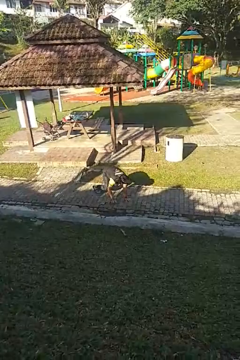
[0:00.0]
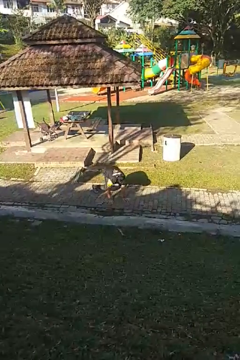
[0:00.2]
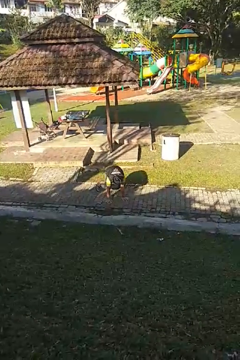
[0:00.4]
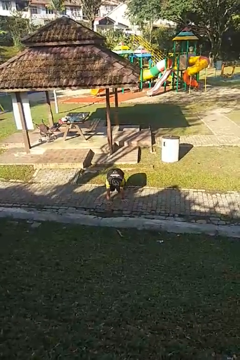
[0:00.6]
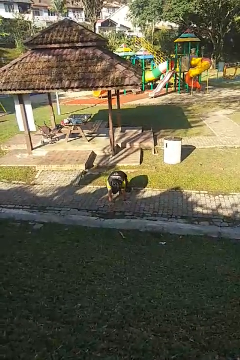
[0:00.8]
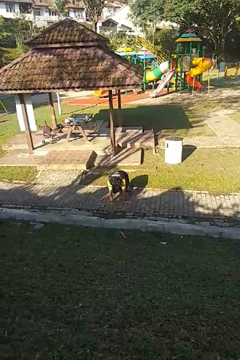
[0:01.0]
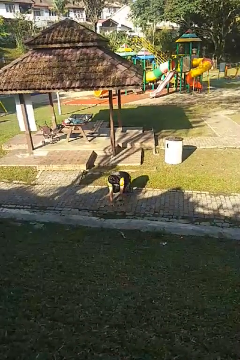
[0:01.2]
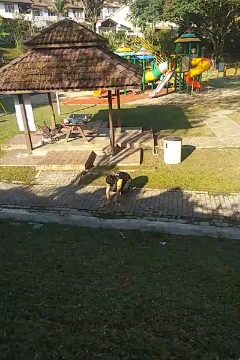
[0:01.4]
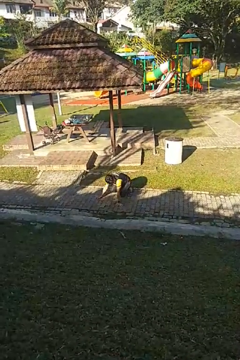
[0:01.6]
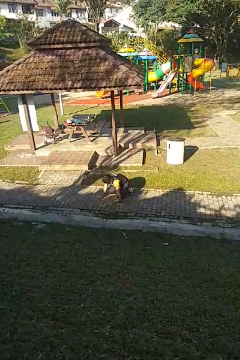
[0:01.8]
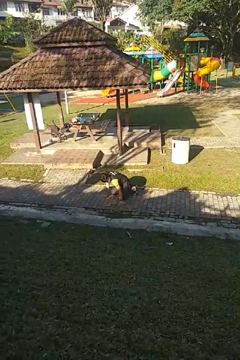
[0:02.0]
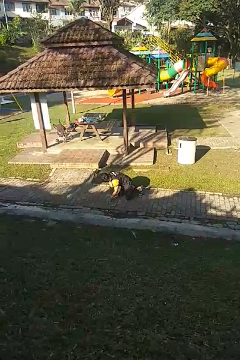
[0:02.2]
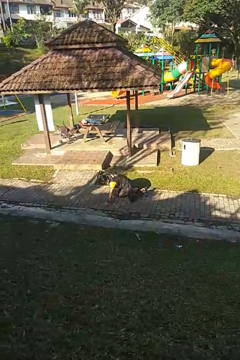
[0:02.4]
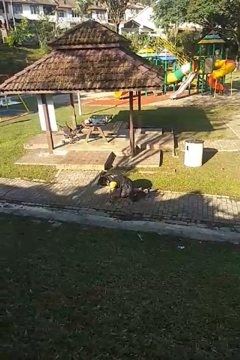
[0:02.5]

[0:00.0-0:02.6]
person crawls

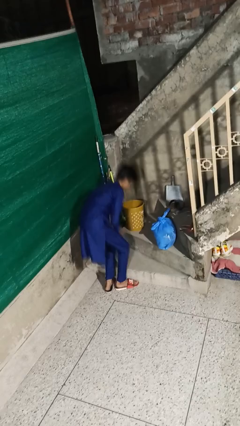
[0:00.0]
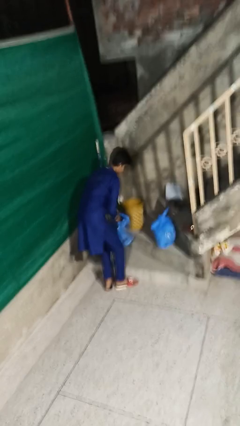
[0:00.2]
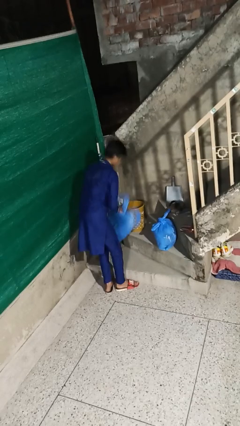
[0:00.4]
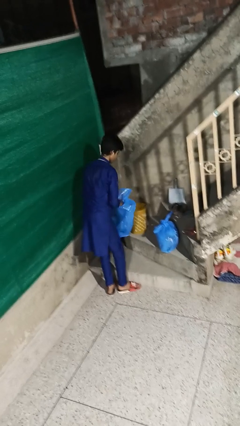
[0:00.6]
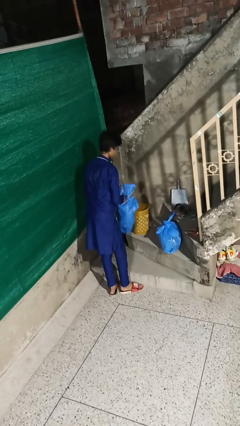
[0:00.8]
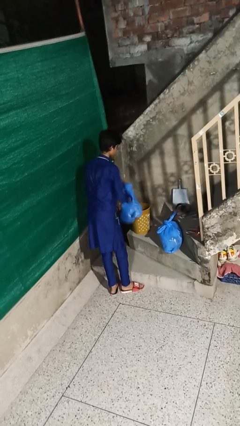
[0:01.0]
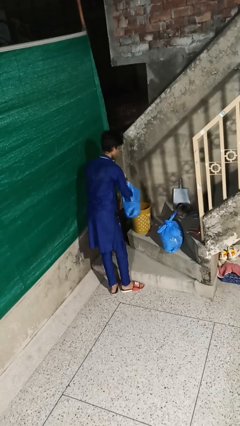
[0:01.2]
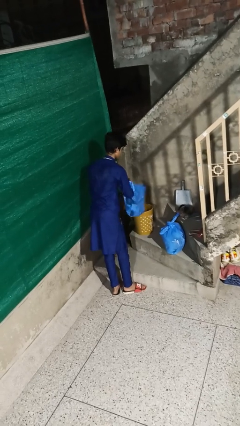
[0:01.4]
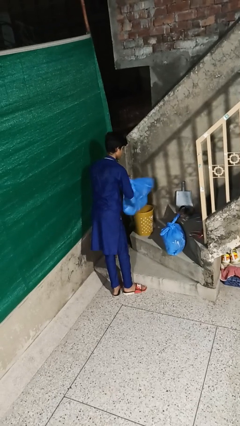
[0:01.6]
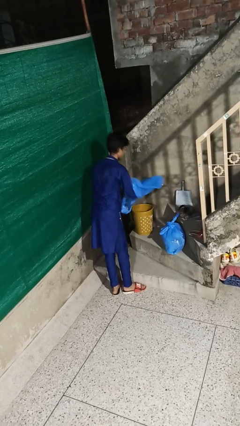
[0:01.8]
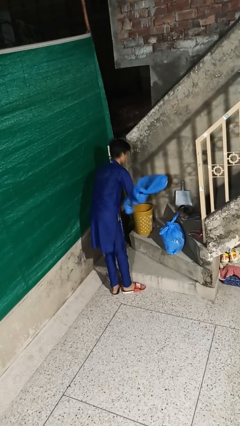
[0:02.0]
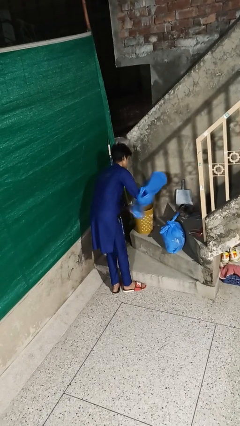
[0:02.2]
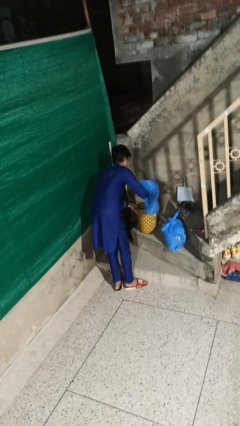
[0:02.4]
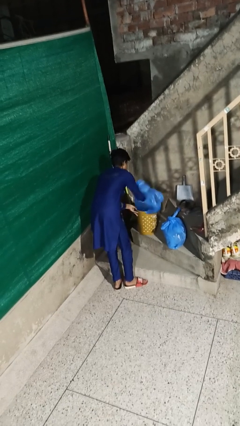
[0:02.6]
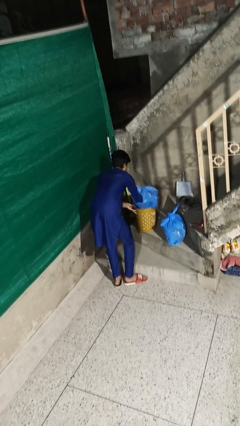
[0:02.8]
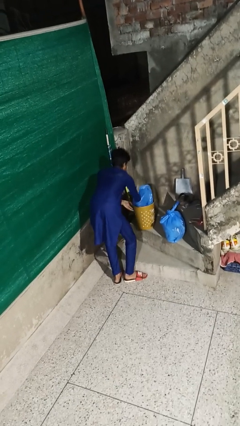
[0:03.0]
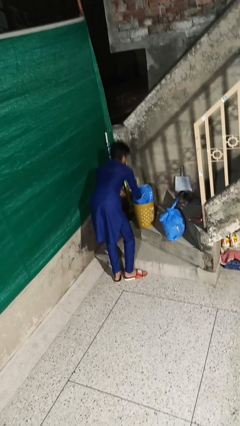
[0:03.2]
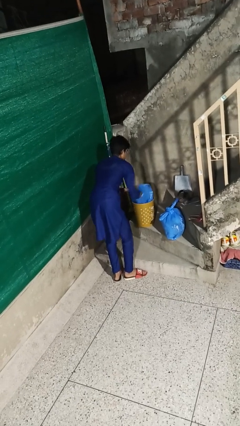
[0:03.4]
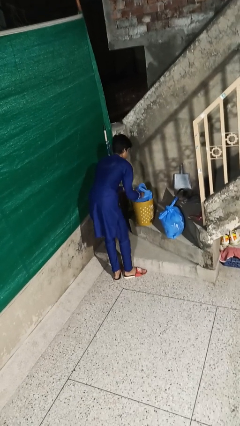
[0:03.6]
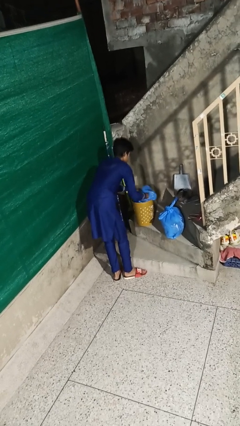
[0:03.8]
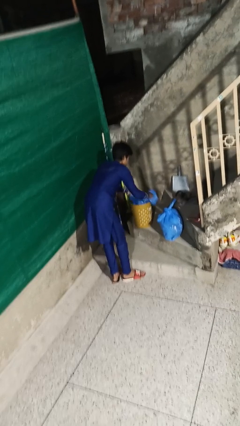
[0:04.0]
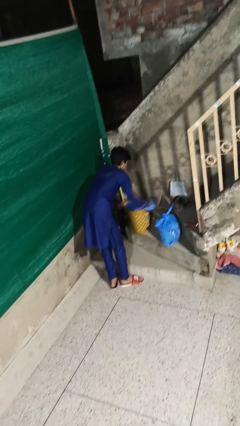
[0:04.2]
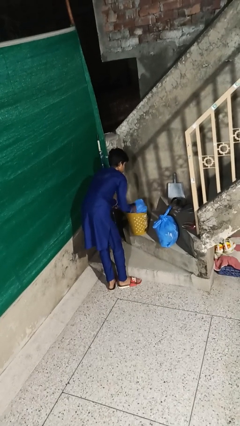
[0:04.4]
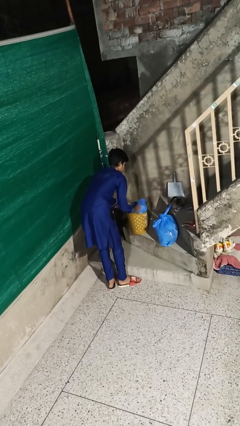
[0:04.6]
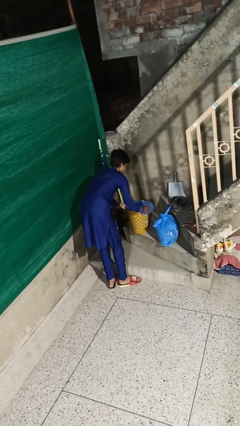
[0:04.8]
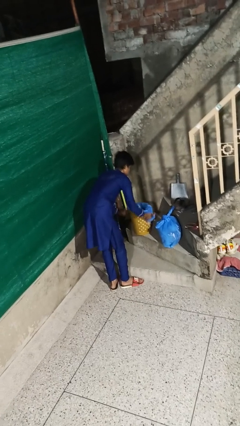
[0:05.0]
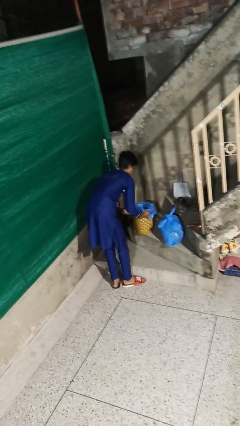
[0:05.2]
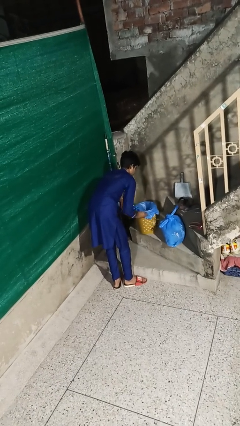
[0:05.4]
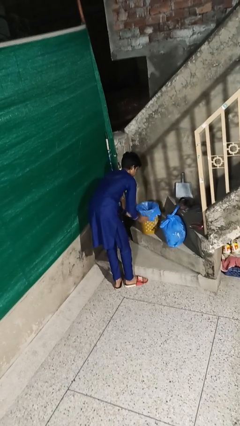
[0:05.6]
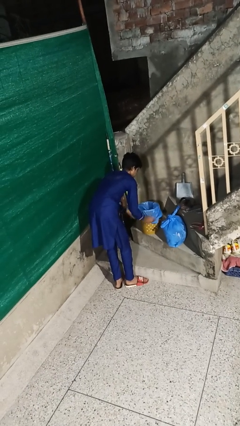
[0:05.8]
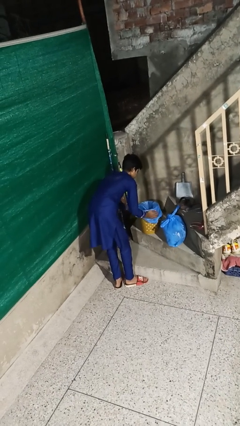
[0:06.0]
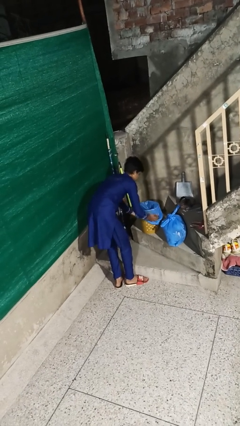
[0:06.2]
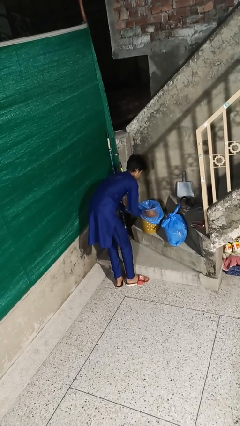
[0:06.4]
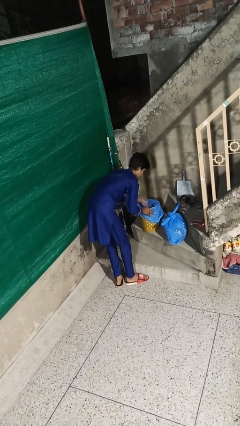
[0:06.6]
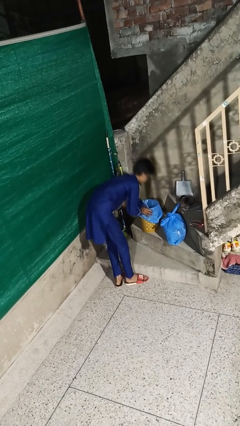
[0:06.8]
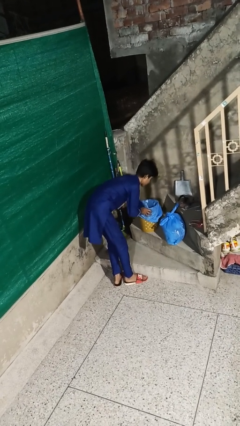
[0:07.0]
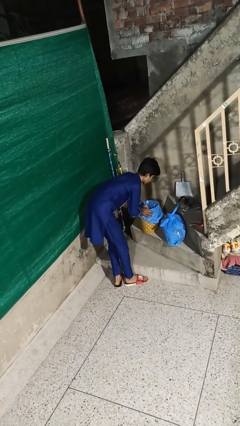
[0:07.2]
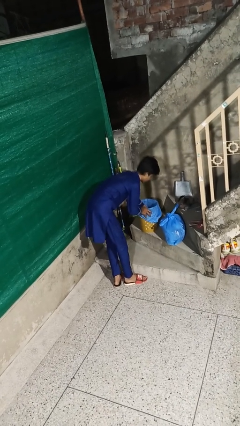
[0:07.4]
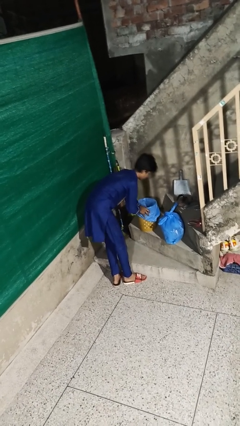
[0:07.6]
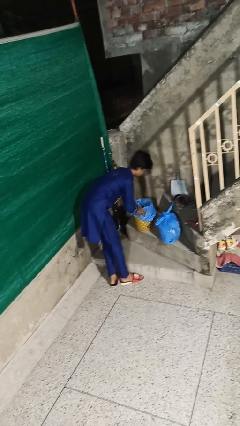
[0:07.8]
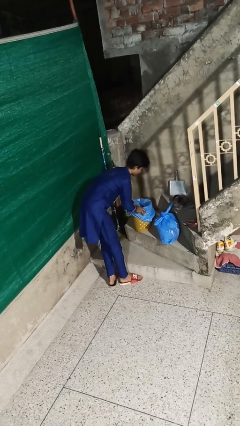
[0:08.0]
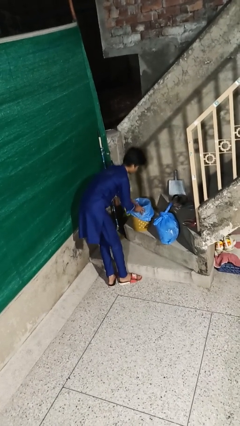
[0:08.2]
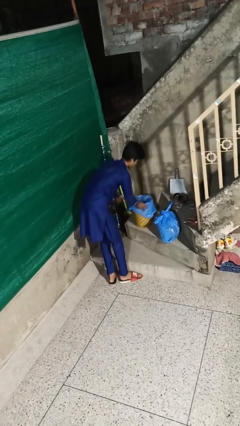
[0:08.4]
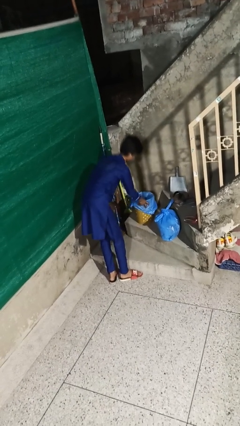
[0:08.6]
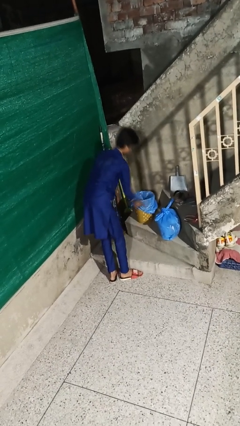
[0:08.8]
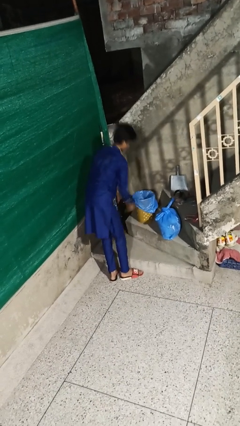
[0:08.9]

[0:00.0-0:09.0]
person inserts trashbag into trashcan

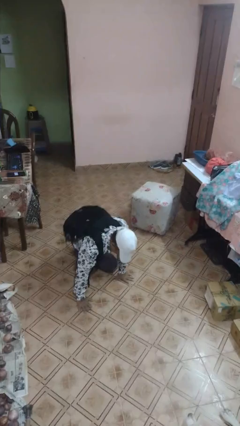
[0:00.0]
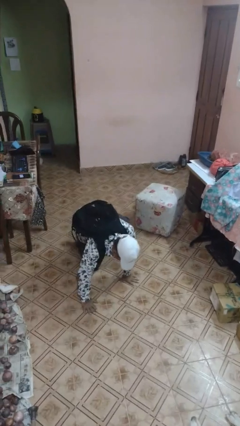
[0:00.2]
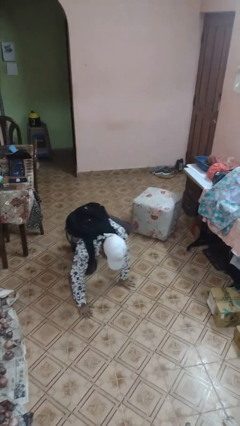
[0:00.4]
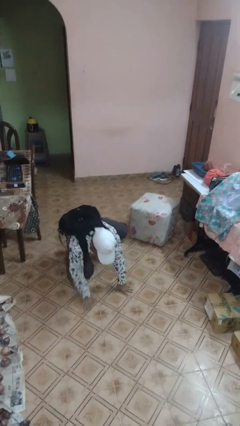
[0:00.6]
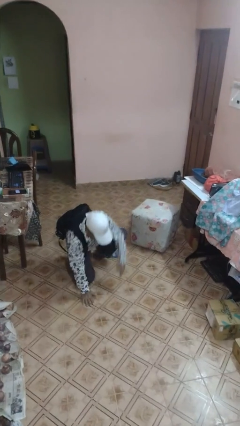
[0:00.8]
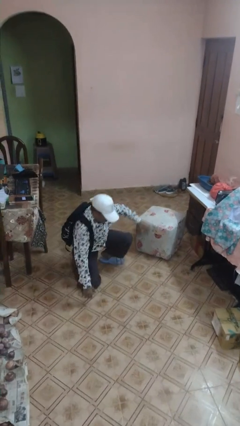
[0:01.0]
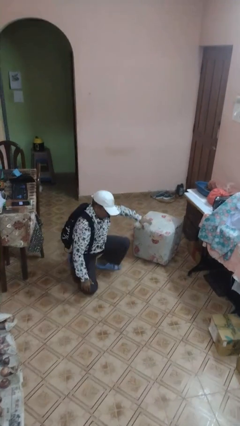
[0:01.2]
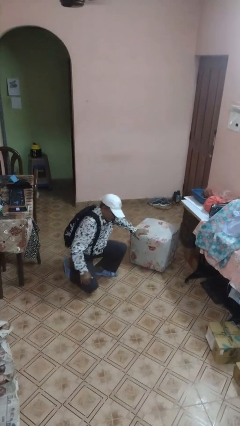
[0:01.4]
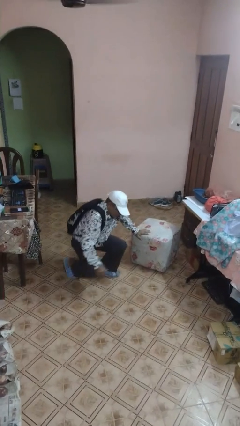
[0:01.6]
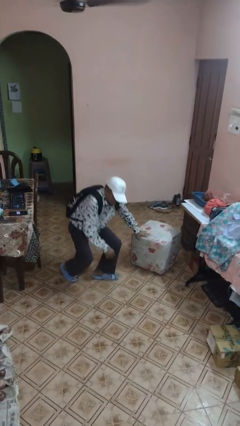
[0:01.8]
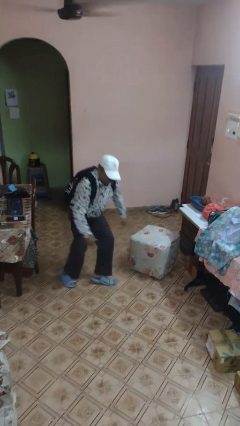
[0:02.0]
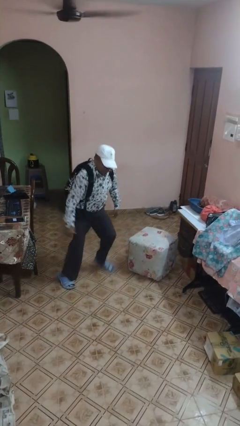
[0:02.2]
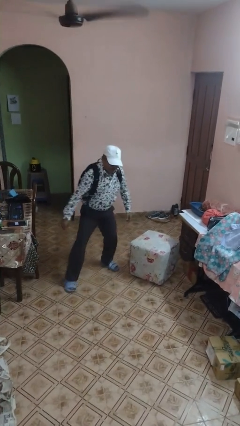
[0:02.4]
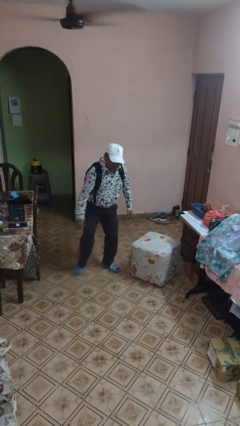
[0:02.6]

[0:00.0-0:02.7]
person stands up from floor

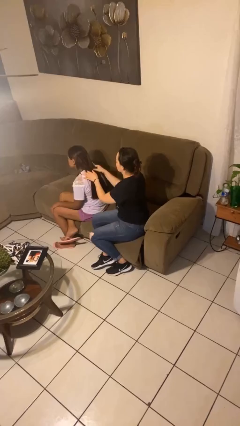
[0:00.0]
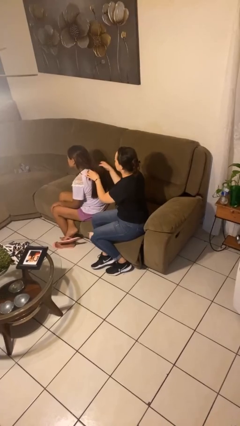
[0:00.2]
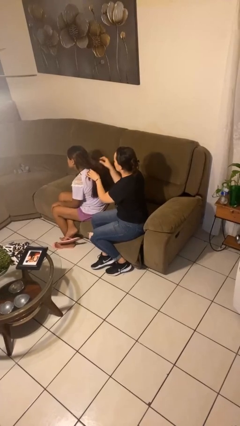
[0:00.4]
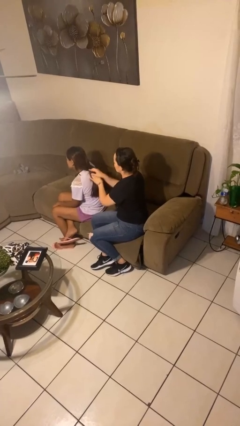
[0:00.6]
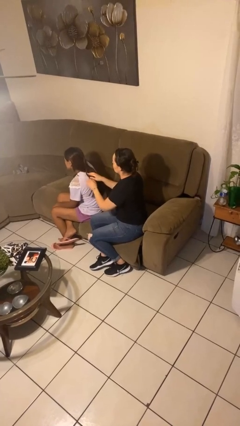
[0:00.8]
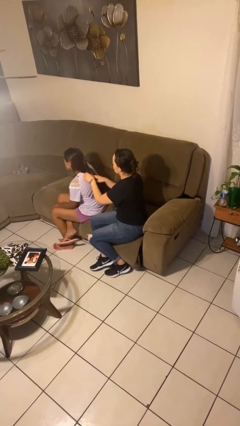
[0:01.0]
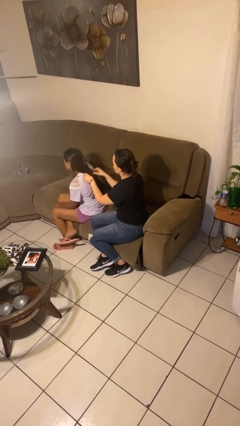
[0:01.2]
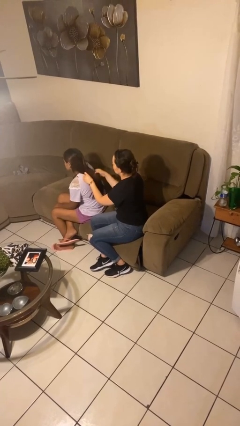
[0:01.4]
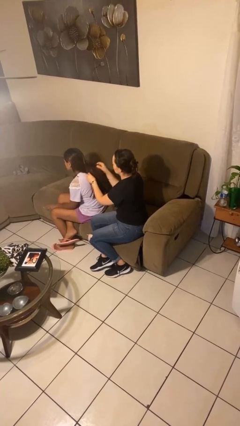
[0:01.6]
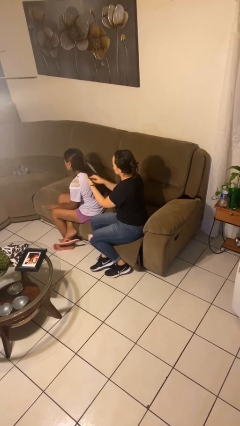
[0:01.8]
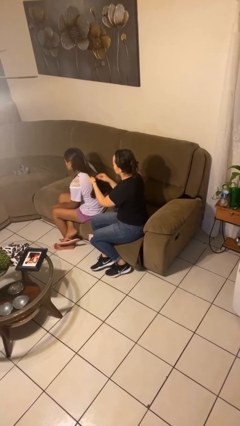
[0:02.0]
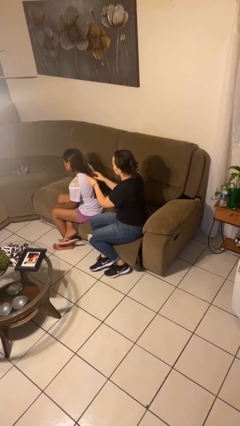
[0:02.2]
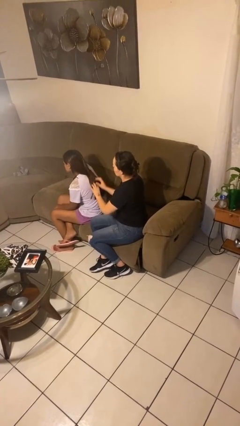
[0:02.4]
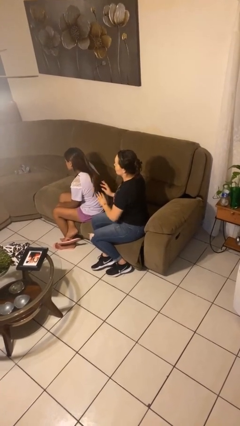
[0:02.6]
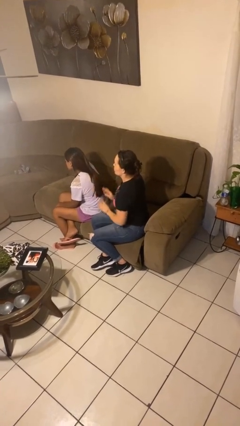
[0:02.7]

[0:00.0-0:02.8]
person braids hair of person

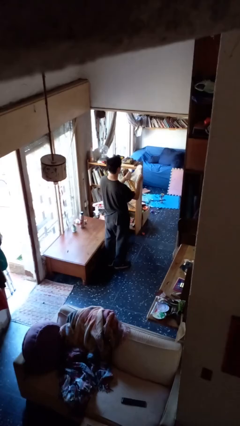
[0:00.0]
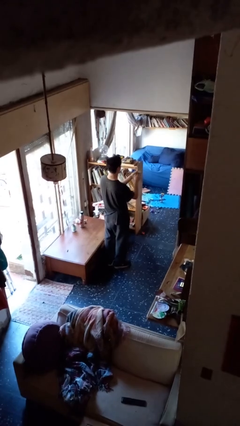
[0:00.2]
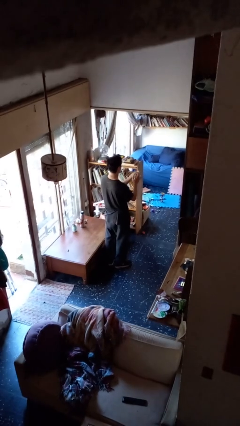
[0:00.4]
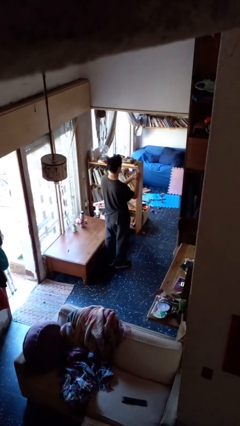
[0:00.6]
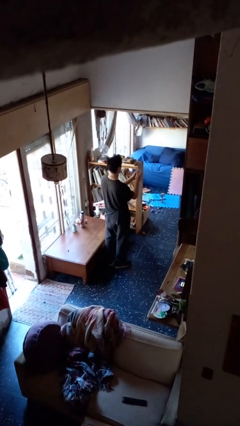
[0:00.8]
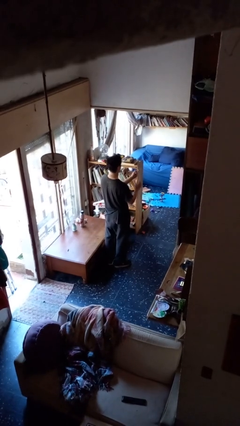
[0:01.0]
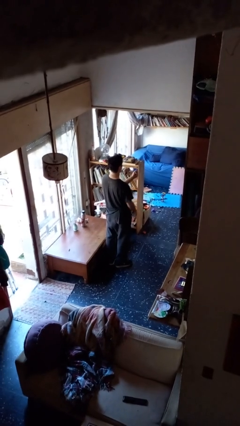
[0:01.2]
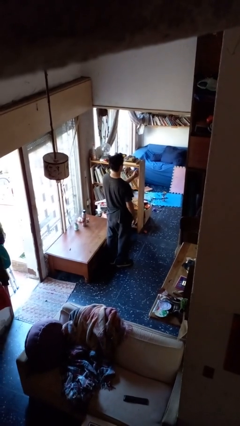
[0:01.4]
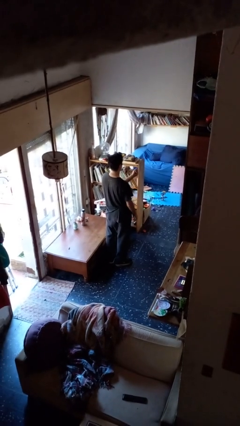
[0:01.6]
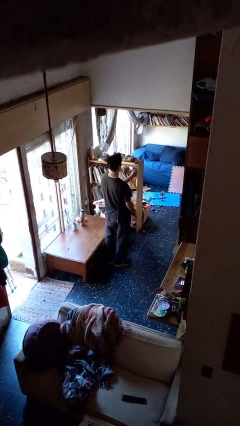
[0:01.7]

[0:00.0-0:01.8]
person crumples paper
